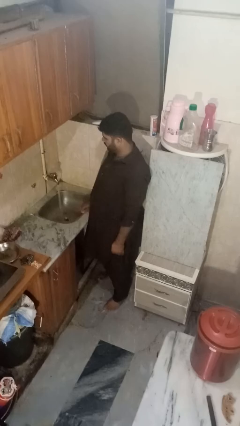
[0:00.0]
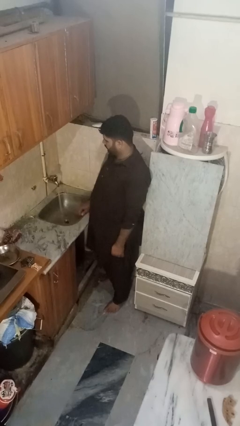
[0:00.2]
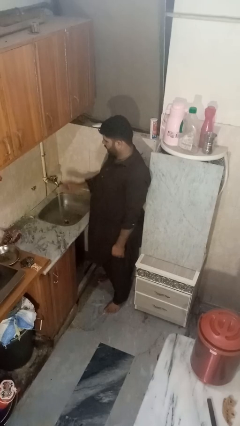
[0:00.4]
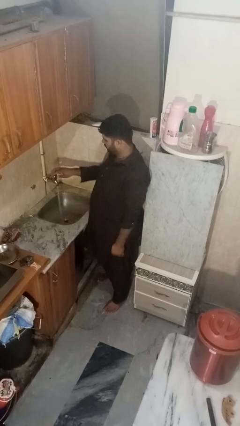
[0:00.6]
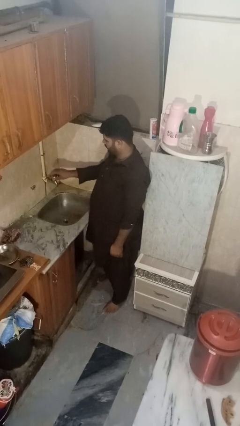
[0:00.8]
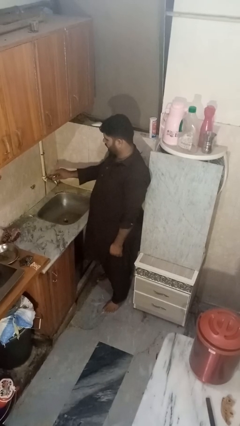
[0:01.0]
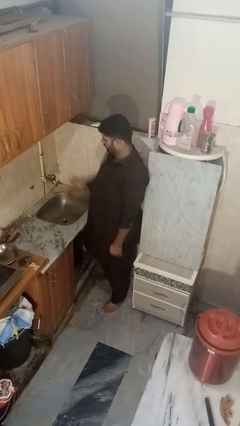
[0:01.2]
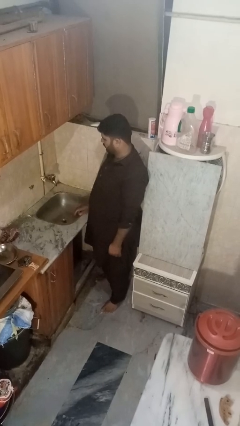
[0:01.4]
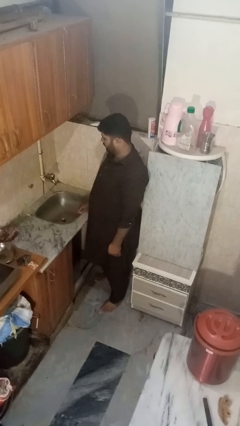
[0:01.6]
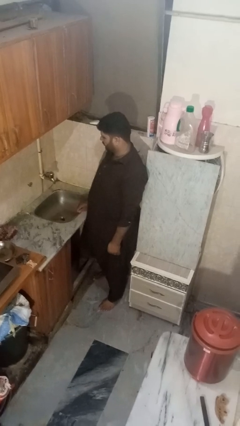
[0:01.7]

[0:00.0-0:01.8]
person turns off faucet

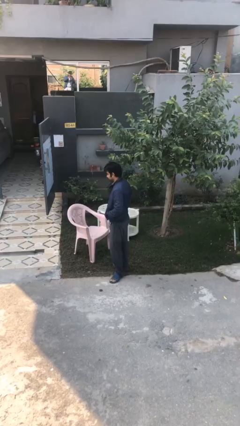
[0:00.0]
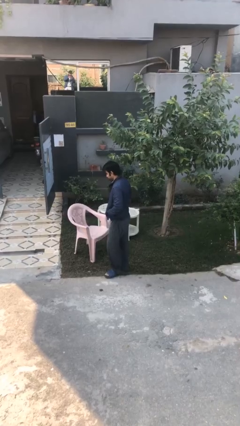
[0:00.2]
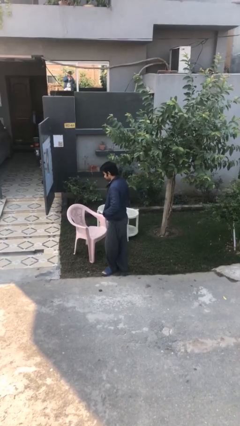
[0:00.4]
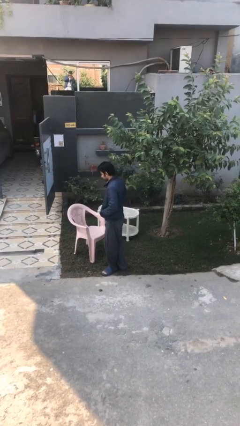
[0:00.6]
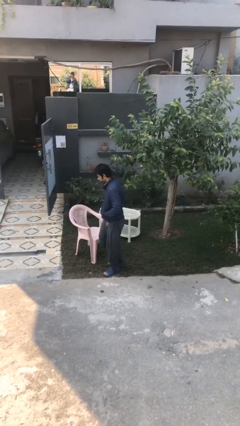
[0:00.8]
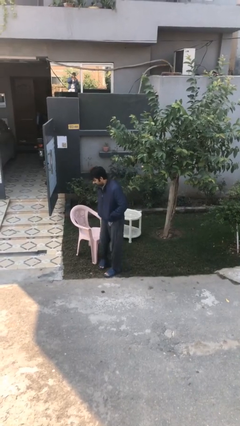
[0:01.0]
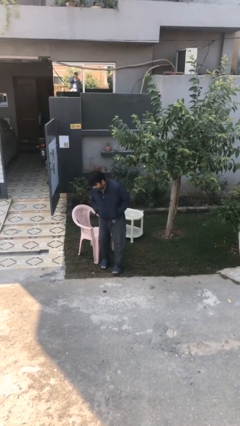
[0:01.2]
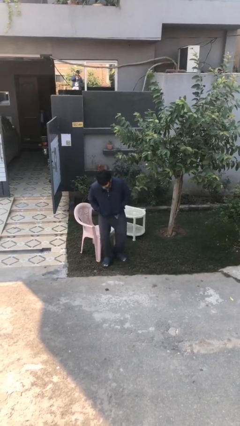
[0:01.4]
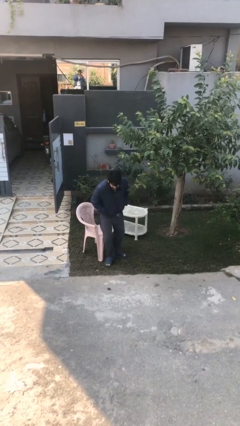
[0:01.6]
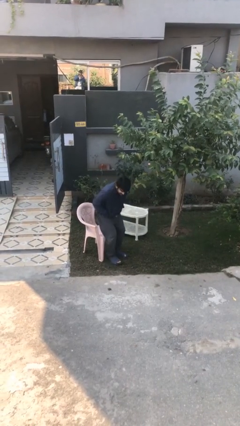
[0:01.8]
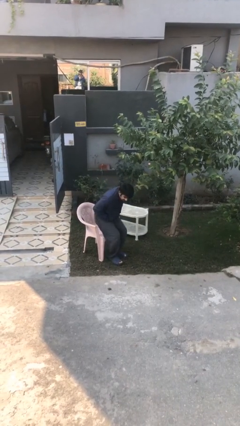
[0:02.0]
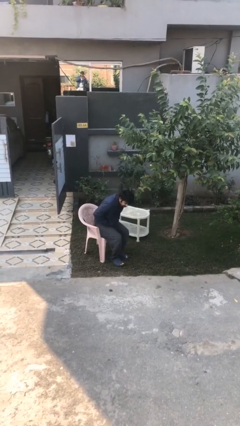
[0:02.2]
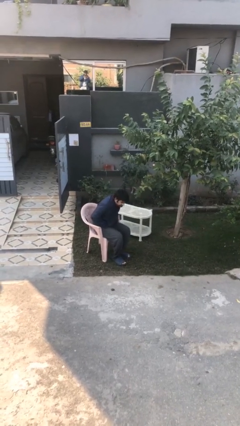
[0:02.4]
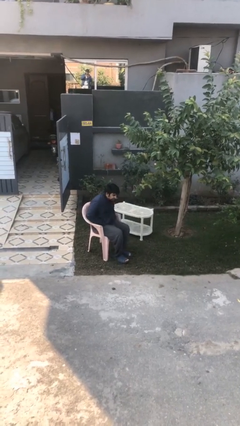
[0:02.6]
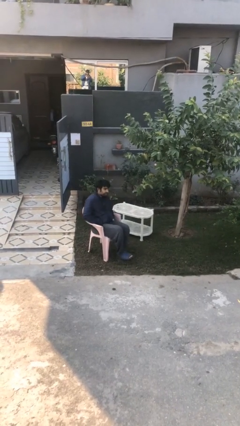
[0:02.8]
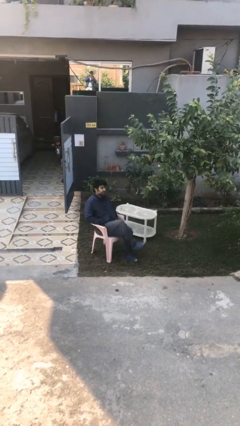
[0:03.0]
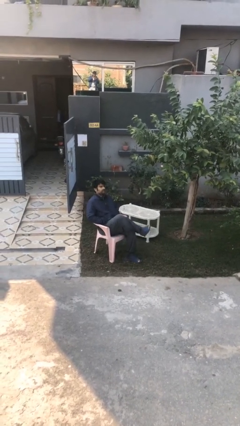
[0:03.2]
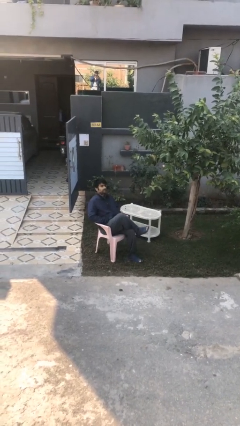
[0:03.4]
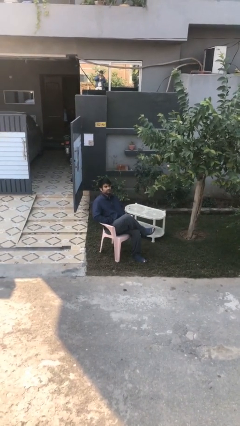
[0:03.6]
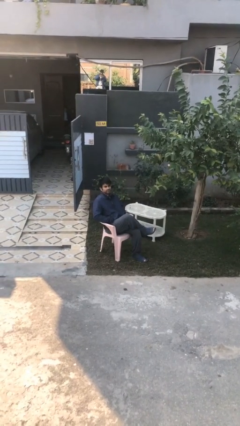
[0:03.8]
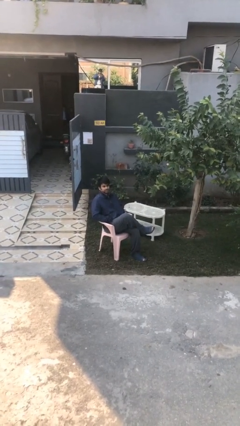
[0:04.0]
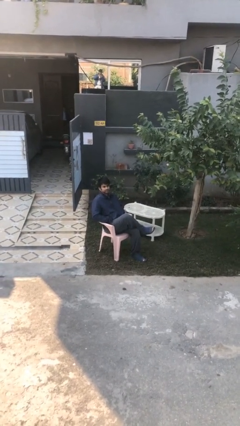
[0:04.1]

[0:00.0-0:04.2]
person sits down

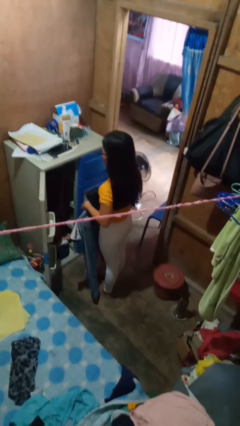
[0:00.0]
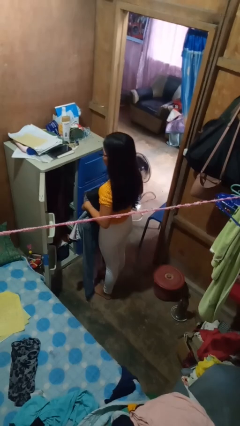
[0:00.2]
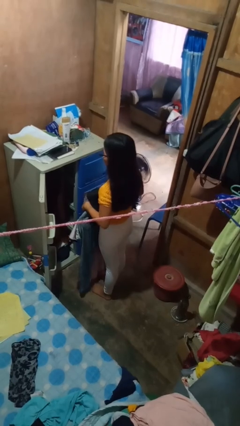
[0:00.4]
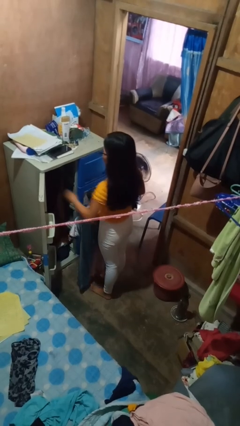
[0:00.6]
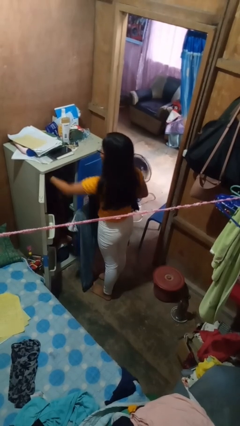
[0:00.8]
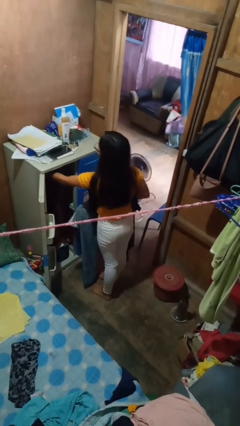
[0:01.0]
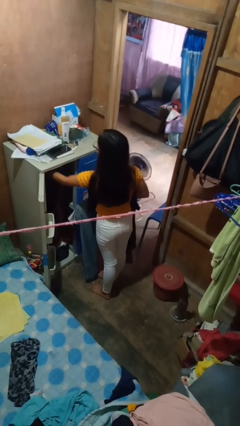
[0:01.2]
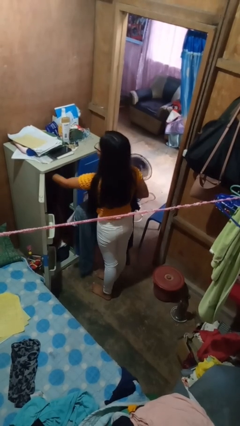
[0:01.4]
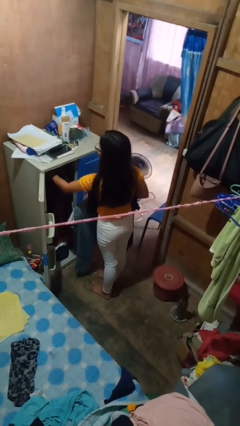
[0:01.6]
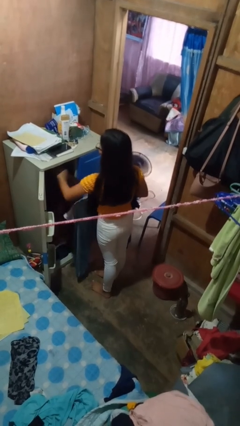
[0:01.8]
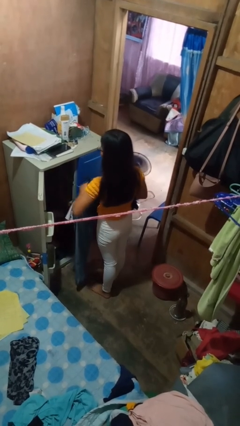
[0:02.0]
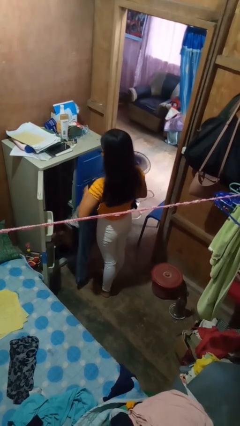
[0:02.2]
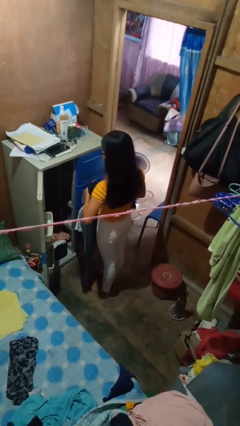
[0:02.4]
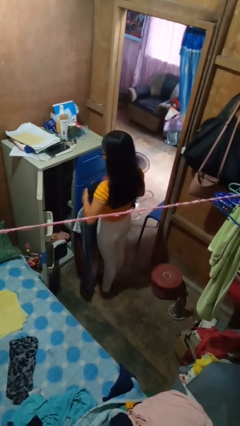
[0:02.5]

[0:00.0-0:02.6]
person takes clothes from closet

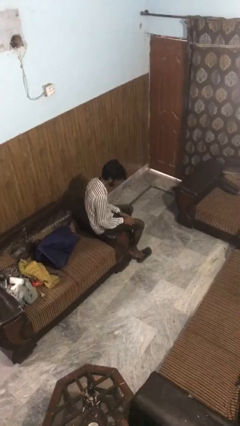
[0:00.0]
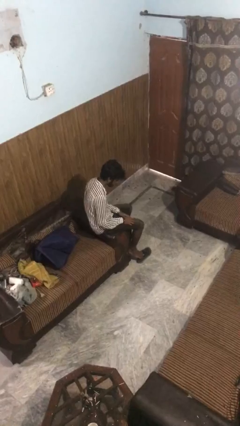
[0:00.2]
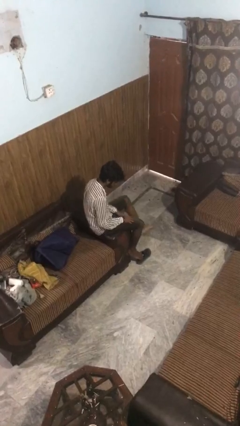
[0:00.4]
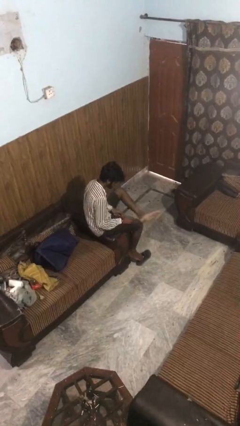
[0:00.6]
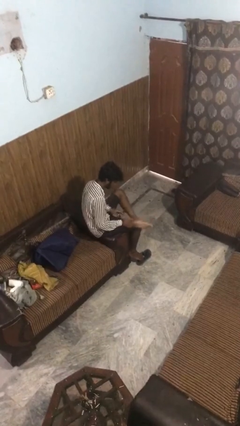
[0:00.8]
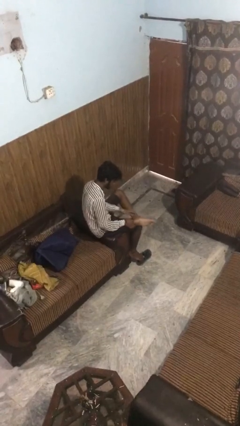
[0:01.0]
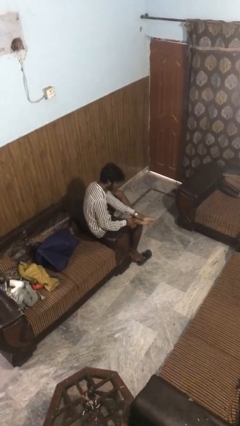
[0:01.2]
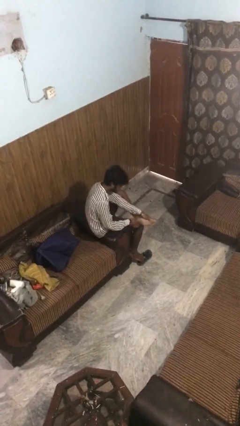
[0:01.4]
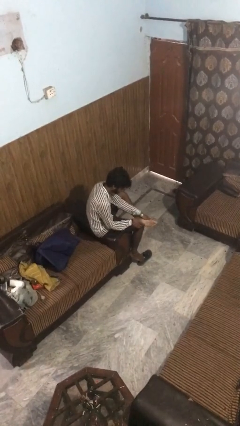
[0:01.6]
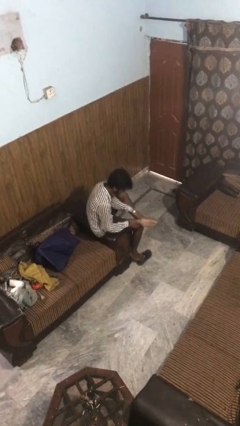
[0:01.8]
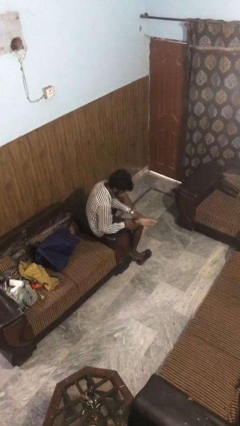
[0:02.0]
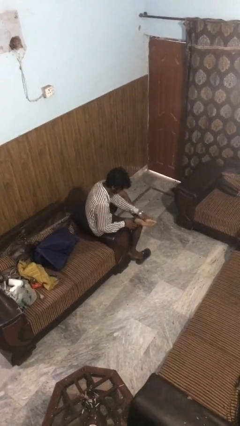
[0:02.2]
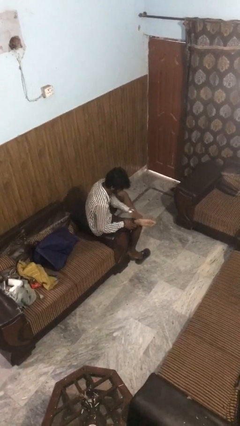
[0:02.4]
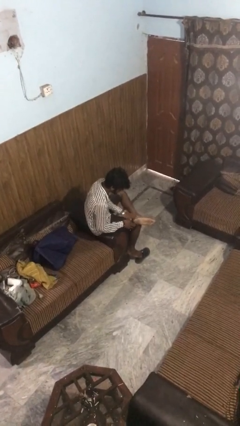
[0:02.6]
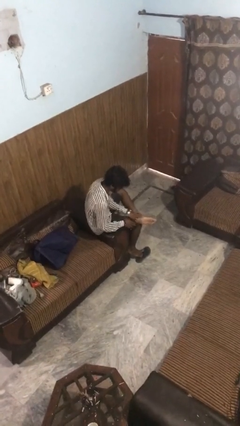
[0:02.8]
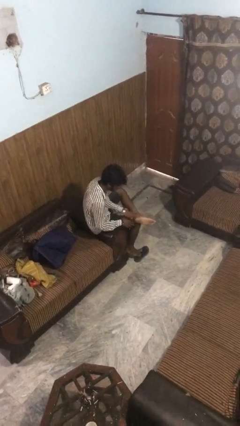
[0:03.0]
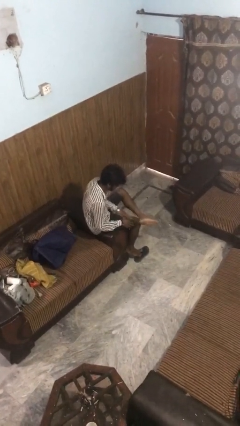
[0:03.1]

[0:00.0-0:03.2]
person rubs foot

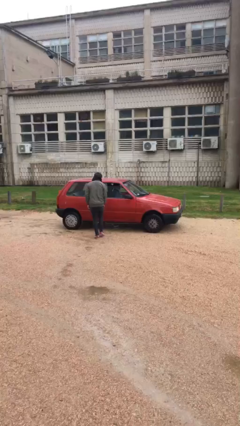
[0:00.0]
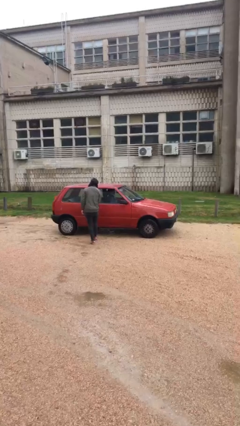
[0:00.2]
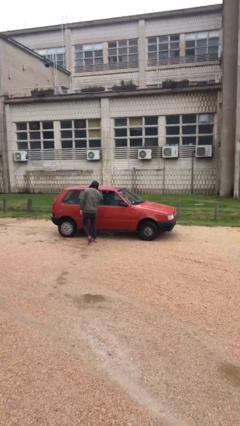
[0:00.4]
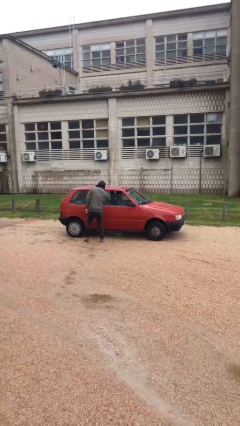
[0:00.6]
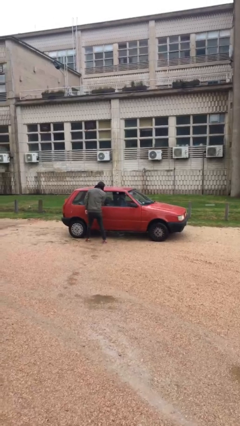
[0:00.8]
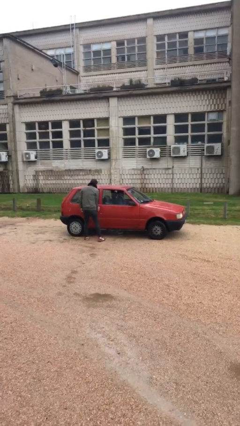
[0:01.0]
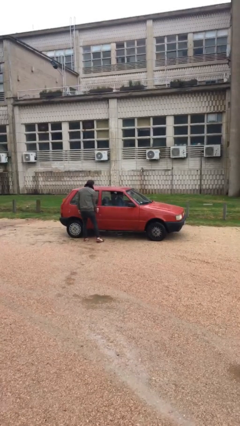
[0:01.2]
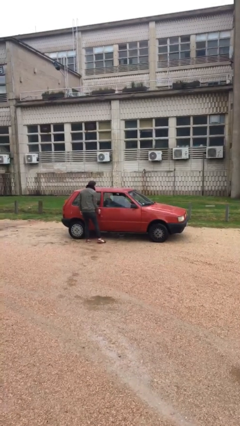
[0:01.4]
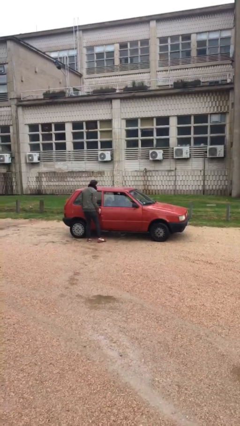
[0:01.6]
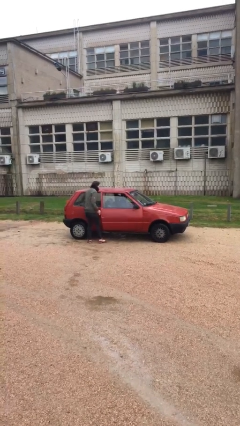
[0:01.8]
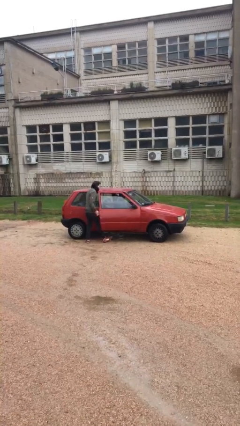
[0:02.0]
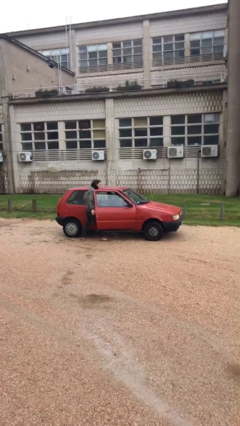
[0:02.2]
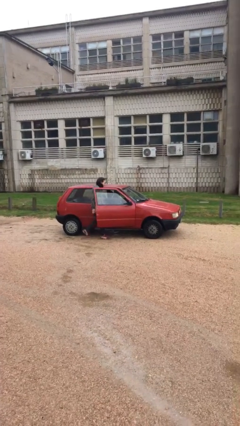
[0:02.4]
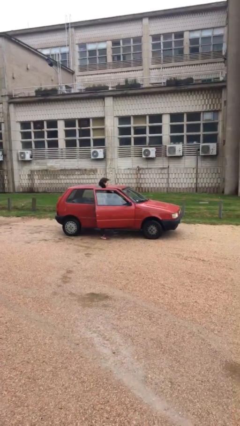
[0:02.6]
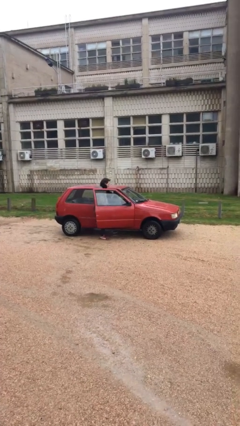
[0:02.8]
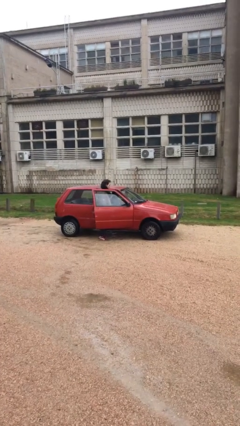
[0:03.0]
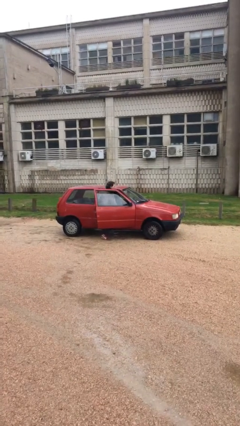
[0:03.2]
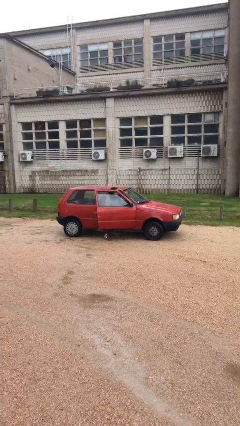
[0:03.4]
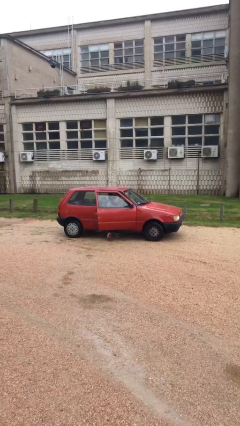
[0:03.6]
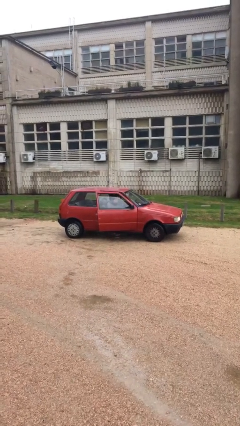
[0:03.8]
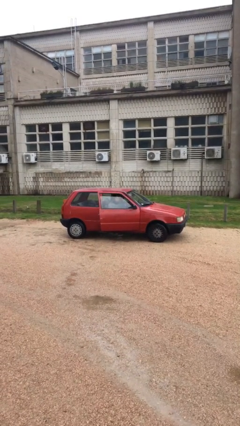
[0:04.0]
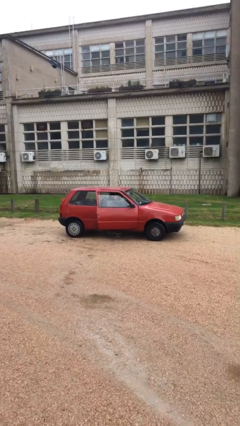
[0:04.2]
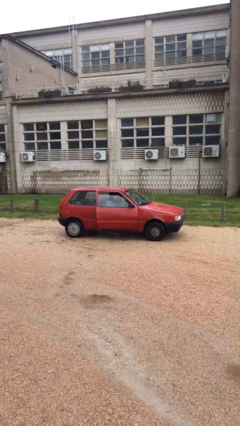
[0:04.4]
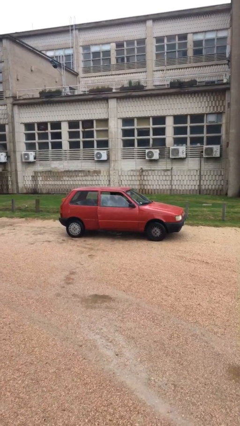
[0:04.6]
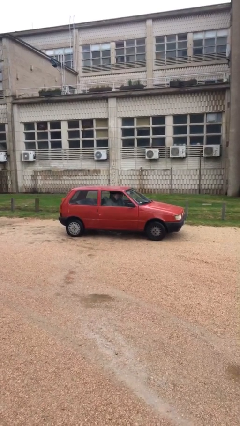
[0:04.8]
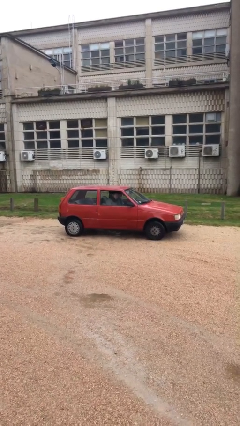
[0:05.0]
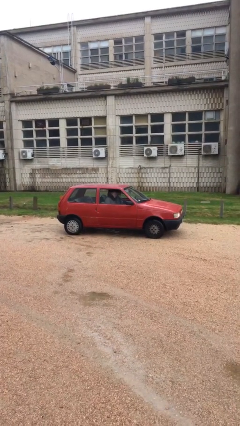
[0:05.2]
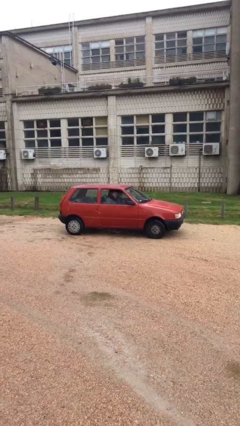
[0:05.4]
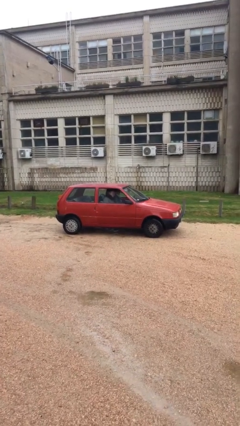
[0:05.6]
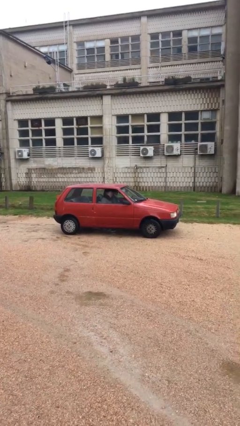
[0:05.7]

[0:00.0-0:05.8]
car picks up person

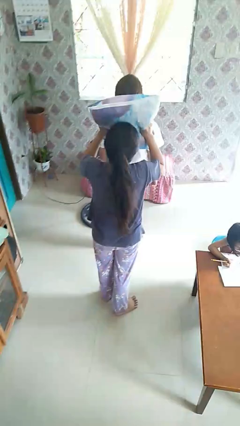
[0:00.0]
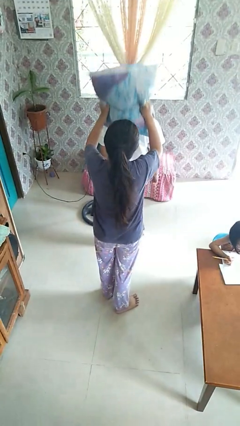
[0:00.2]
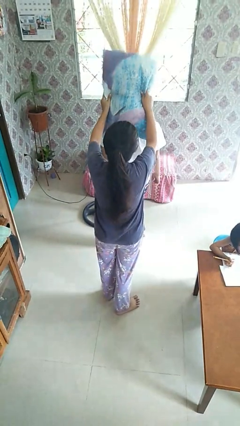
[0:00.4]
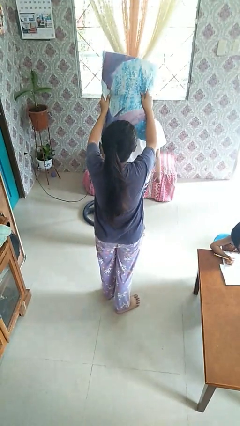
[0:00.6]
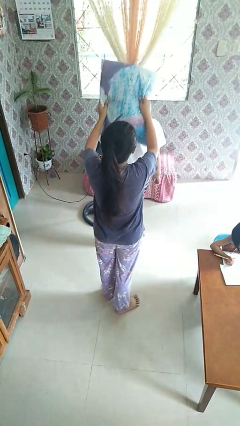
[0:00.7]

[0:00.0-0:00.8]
person hits person with pillow
